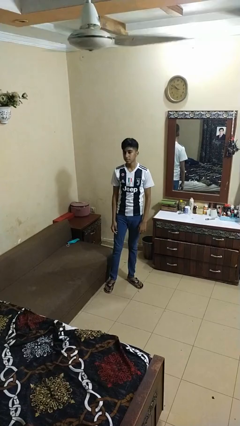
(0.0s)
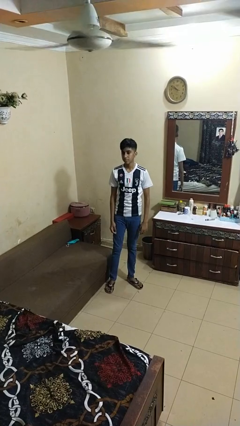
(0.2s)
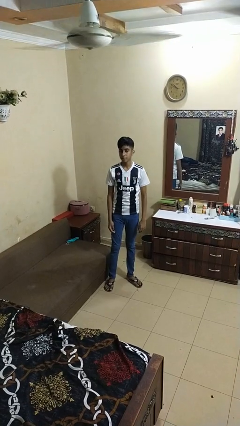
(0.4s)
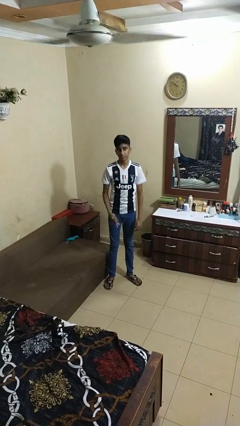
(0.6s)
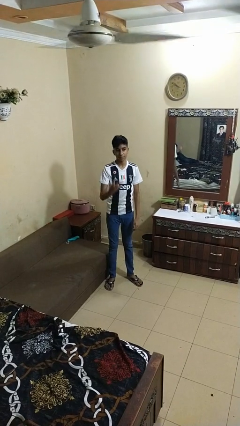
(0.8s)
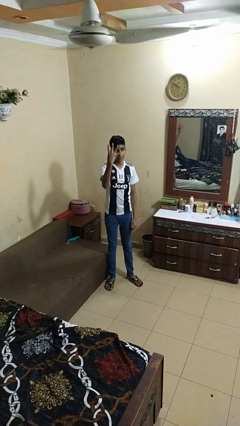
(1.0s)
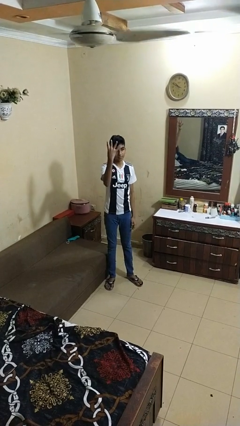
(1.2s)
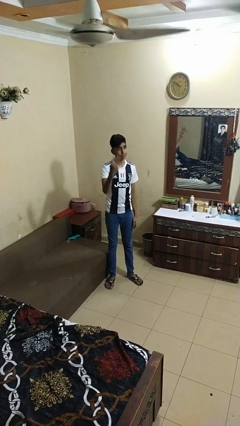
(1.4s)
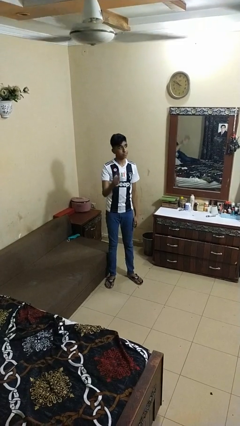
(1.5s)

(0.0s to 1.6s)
person gestures number four

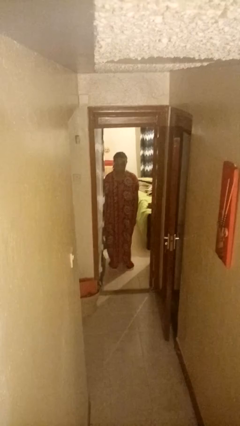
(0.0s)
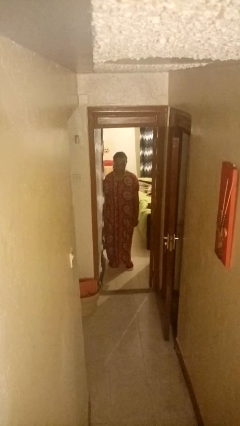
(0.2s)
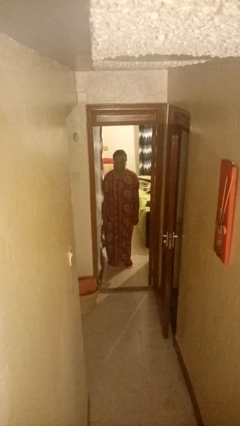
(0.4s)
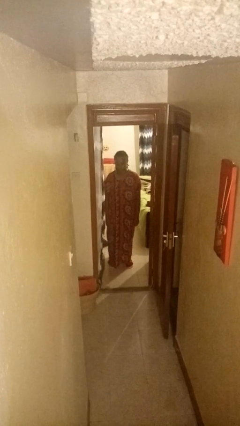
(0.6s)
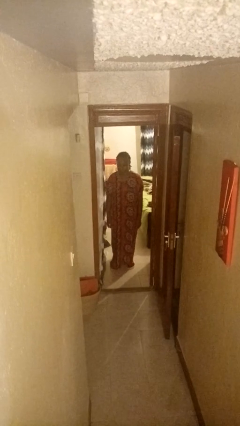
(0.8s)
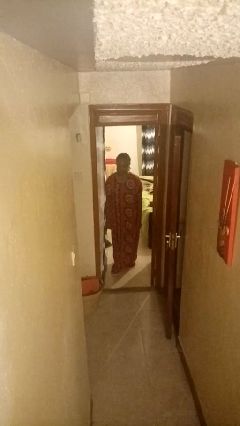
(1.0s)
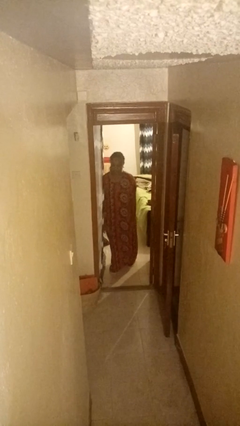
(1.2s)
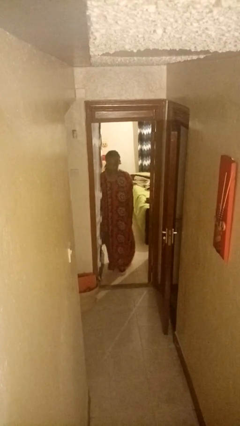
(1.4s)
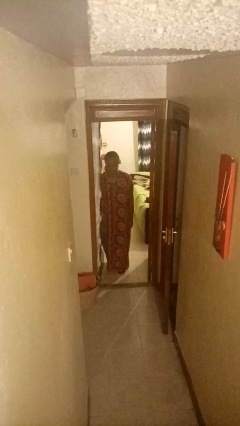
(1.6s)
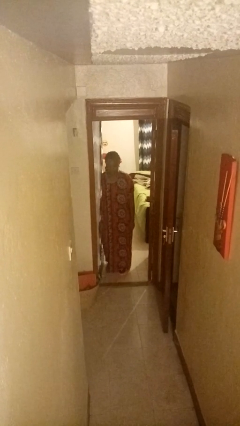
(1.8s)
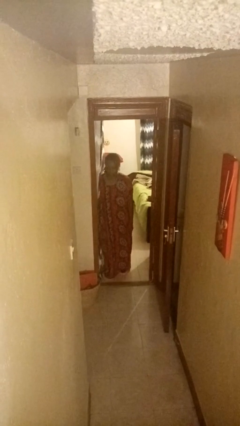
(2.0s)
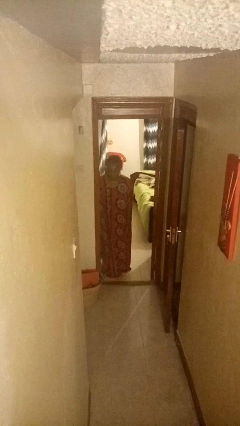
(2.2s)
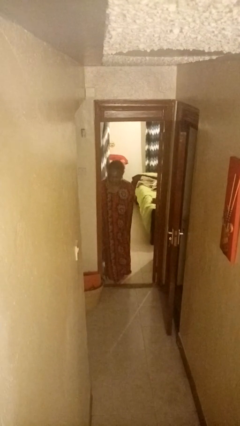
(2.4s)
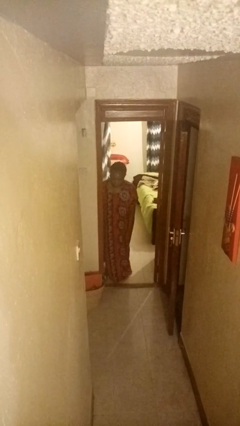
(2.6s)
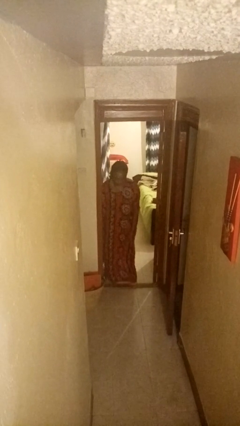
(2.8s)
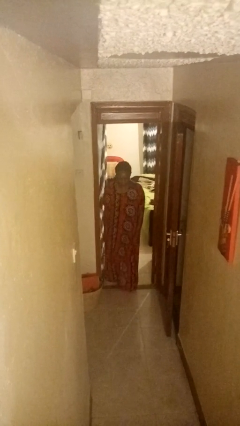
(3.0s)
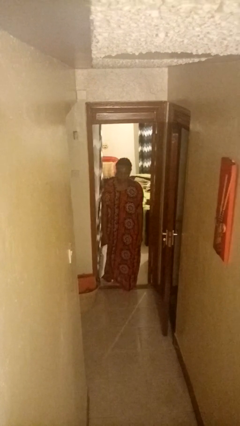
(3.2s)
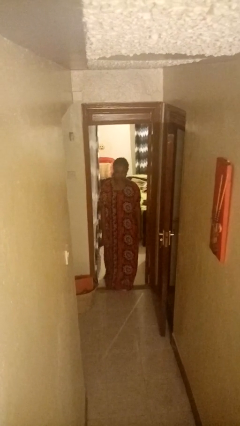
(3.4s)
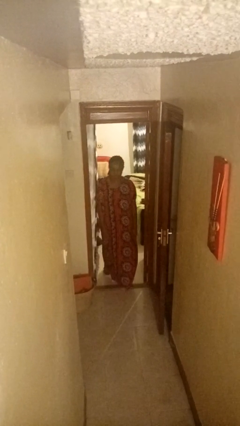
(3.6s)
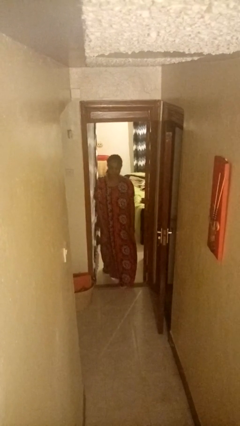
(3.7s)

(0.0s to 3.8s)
person bumps into wall

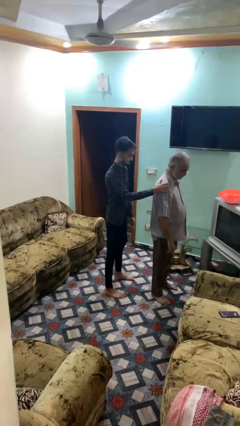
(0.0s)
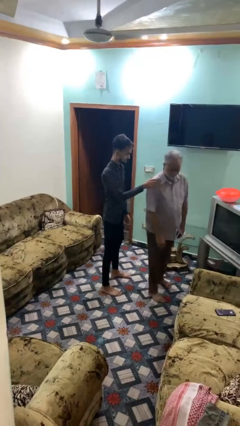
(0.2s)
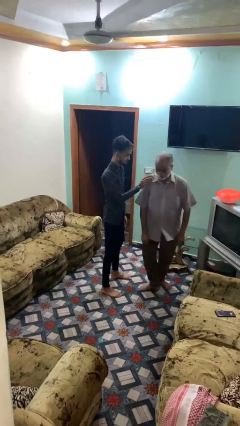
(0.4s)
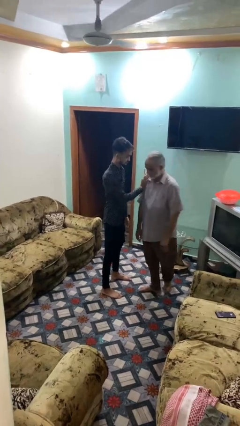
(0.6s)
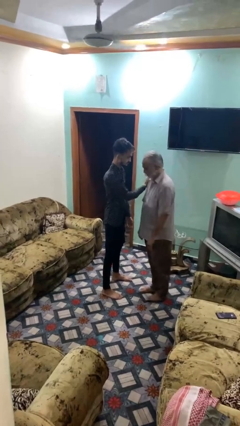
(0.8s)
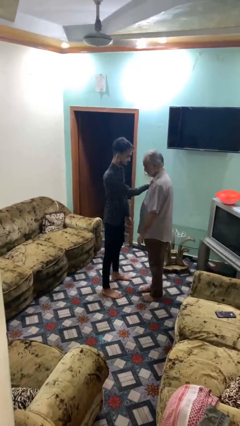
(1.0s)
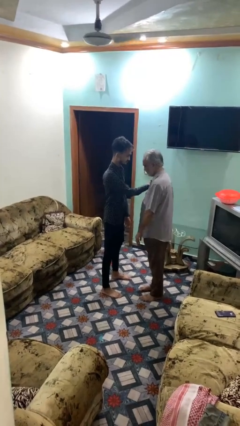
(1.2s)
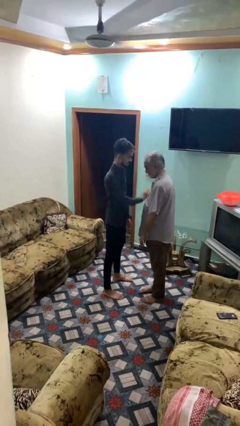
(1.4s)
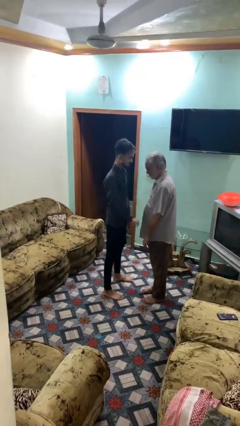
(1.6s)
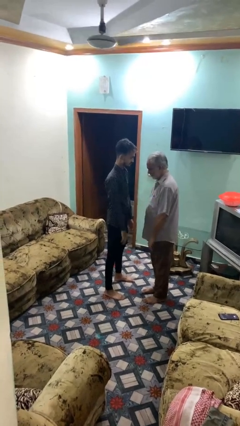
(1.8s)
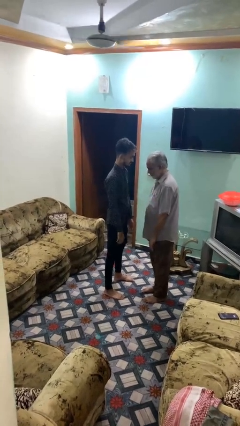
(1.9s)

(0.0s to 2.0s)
person spins person around

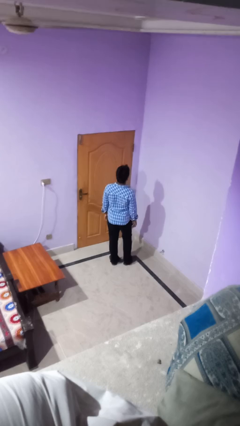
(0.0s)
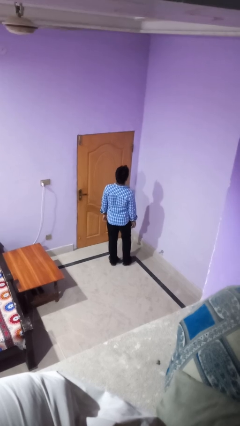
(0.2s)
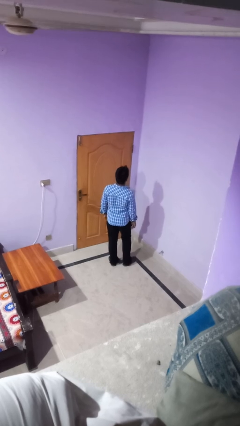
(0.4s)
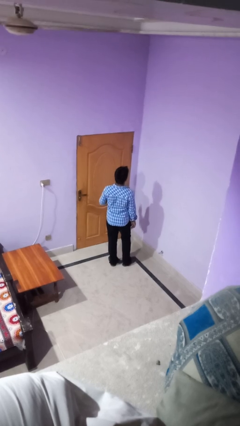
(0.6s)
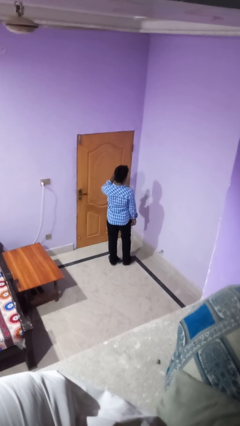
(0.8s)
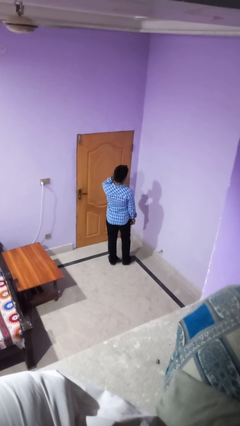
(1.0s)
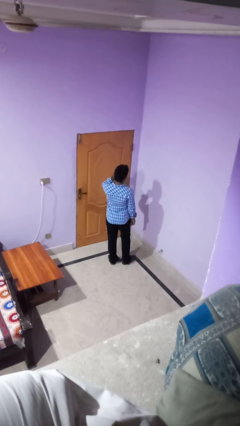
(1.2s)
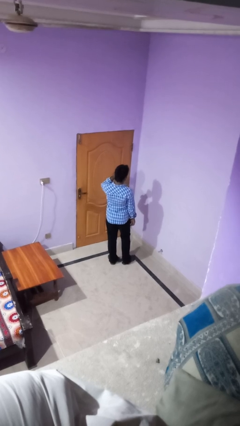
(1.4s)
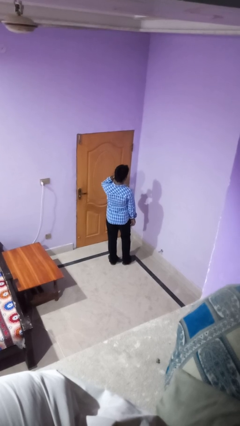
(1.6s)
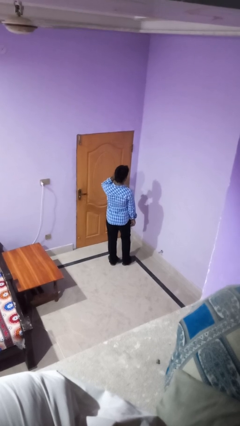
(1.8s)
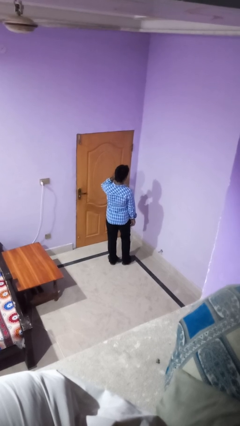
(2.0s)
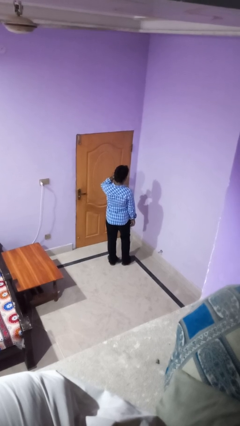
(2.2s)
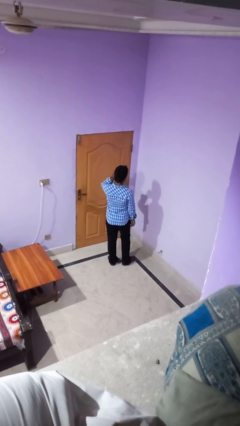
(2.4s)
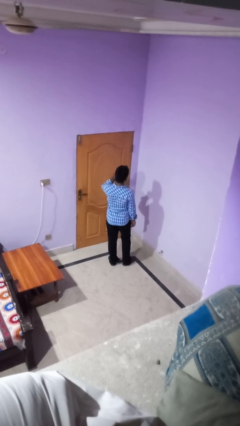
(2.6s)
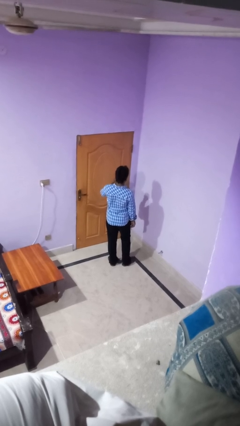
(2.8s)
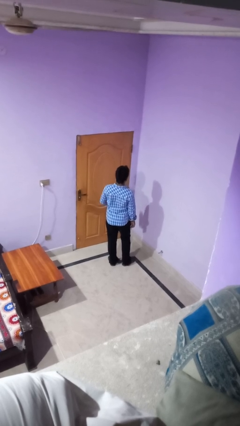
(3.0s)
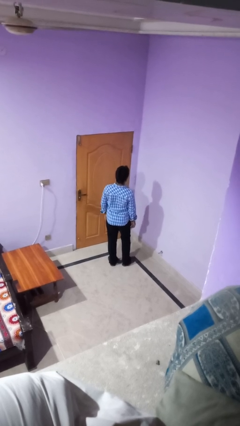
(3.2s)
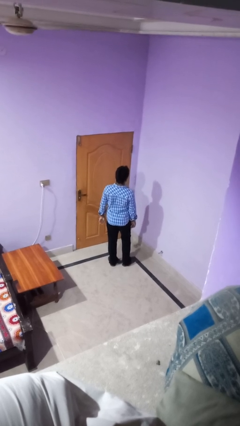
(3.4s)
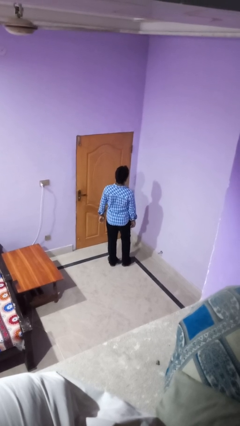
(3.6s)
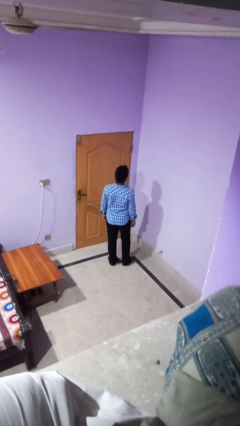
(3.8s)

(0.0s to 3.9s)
person touches earlobe

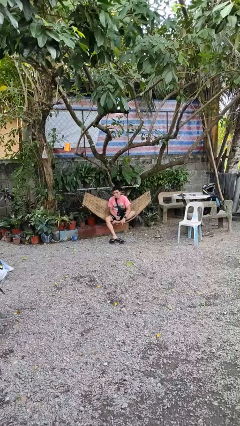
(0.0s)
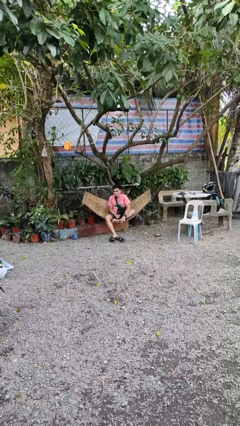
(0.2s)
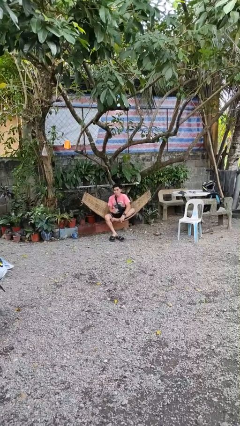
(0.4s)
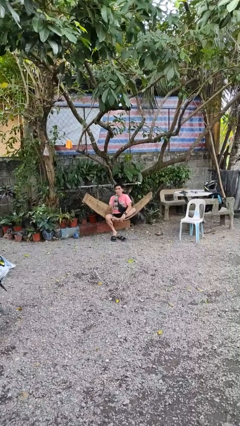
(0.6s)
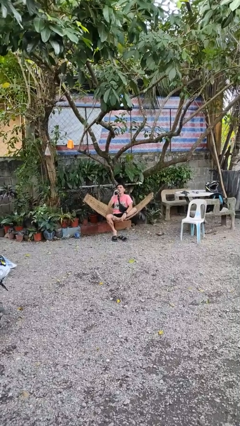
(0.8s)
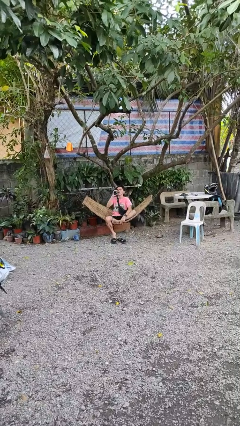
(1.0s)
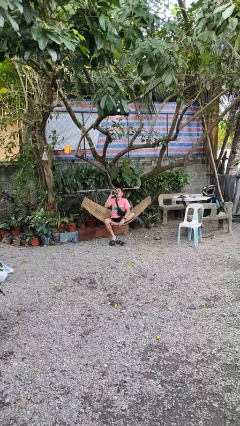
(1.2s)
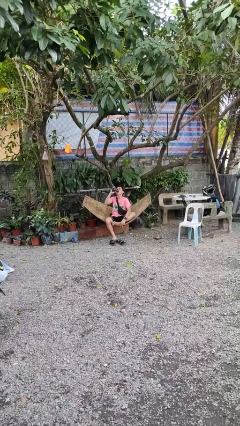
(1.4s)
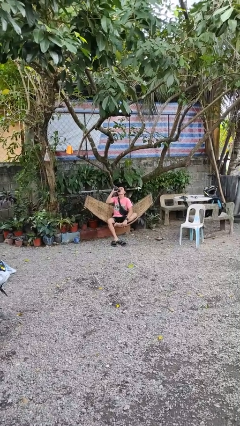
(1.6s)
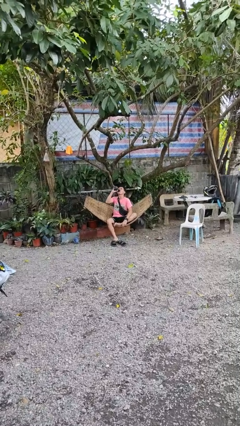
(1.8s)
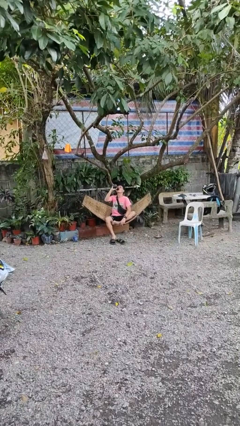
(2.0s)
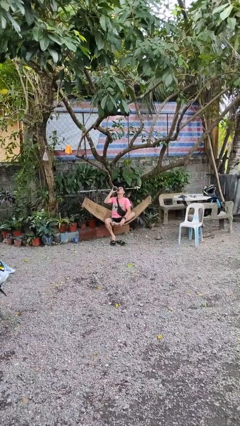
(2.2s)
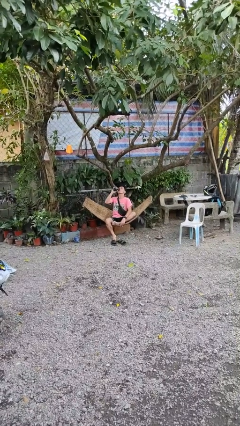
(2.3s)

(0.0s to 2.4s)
person drinks from bottle

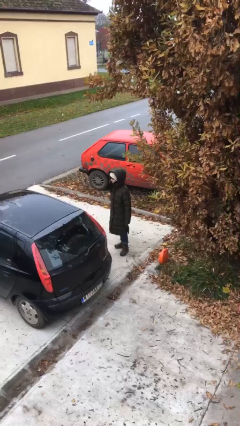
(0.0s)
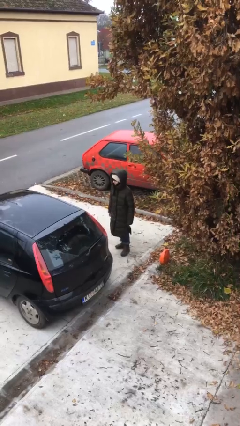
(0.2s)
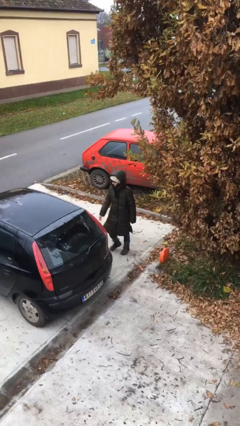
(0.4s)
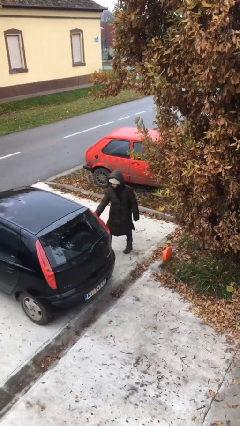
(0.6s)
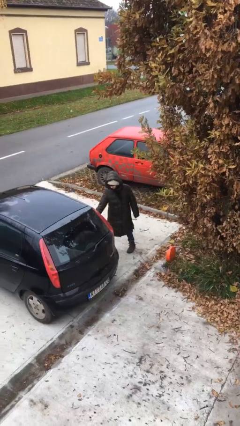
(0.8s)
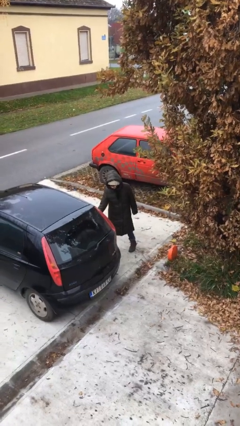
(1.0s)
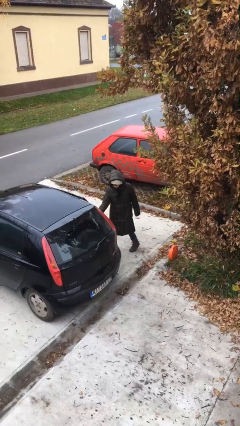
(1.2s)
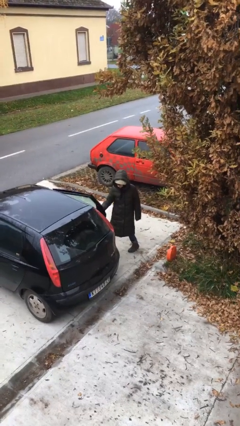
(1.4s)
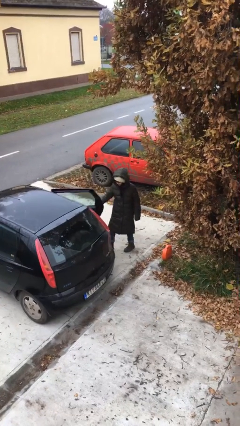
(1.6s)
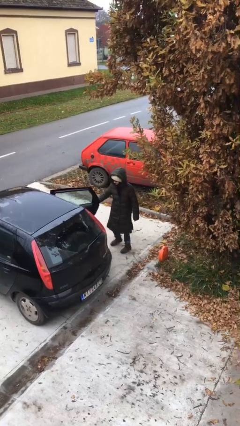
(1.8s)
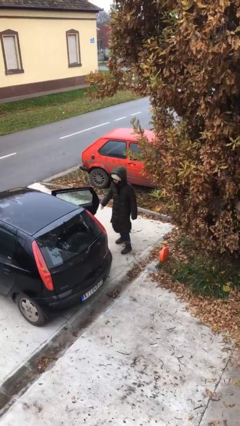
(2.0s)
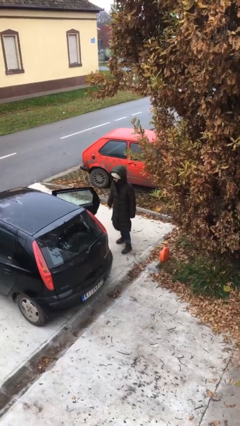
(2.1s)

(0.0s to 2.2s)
person opens car door

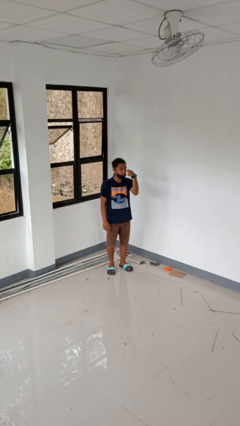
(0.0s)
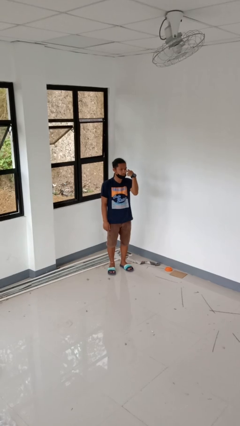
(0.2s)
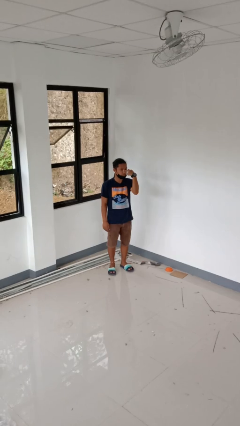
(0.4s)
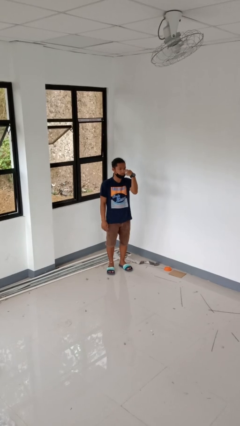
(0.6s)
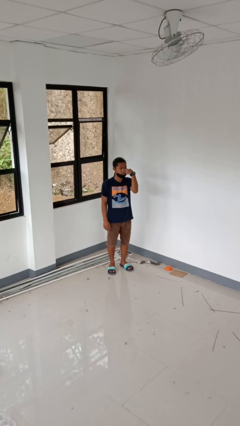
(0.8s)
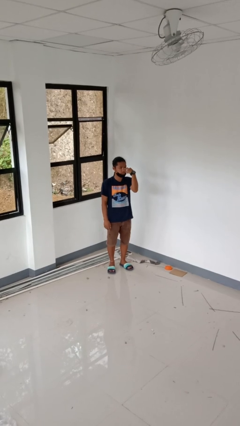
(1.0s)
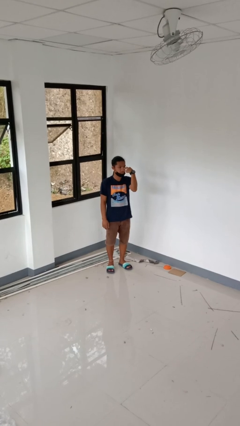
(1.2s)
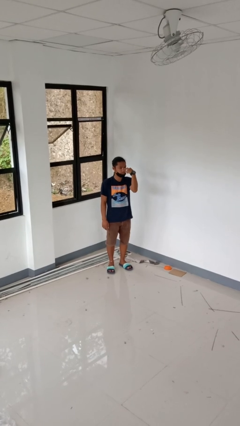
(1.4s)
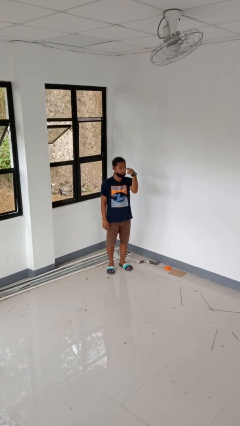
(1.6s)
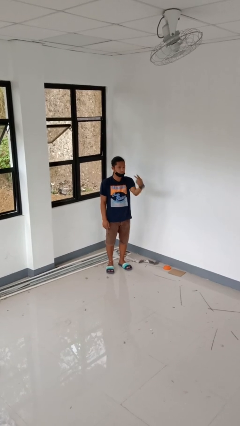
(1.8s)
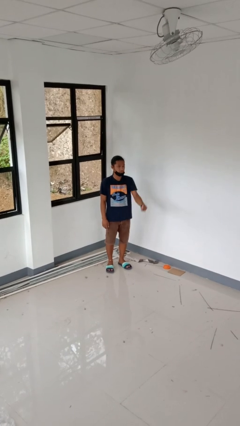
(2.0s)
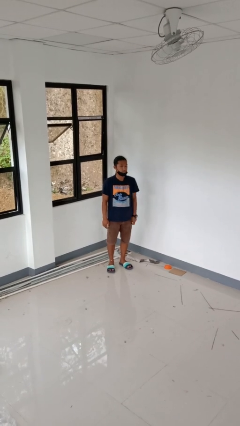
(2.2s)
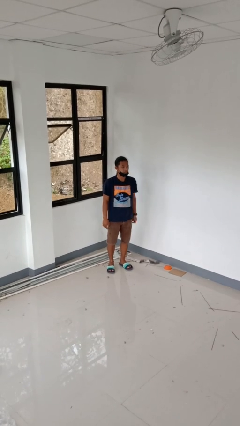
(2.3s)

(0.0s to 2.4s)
person gestures watch closely
